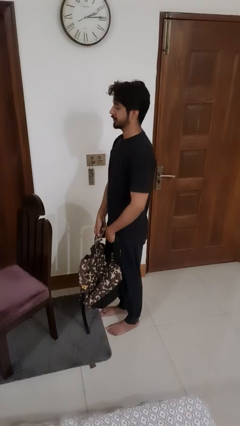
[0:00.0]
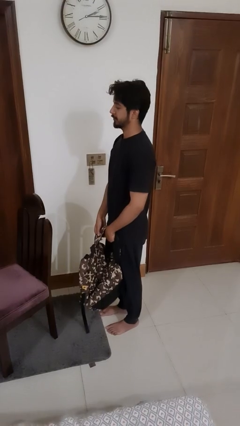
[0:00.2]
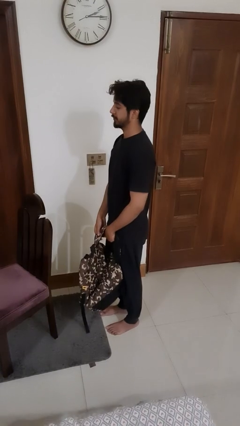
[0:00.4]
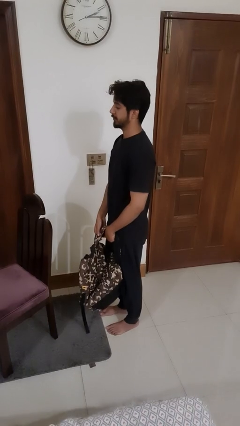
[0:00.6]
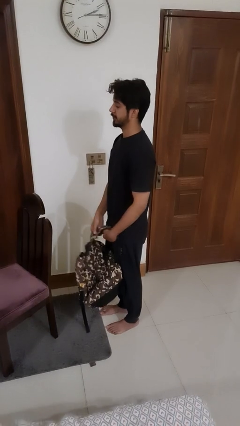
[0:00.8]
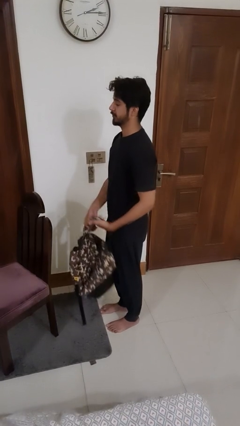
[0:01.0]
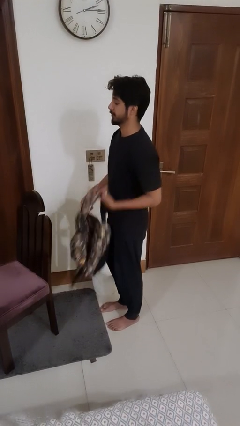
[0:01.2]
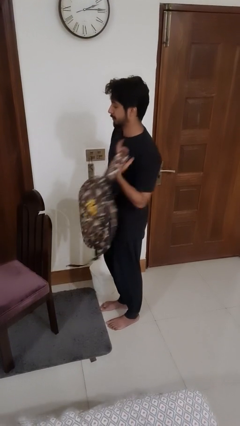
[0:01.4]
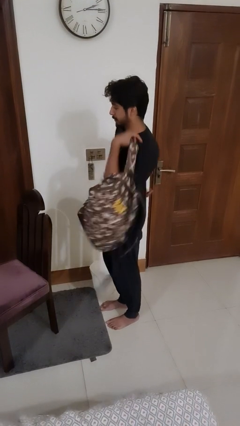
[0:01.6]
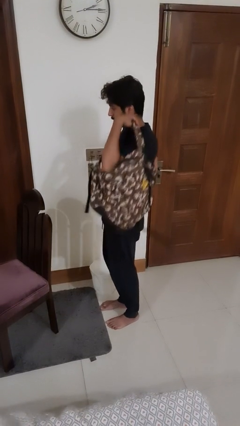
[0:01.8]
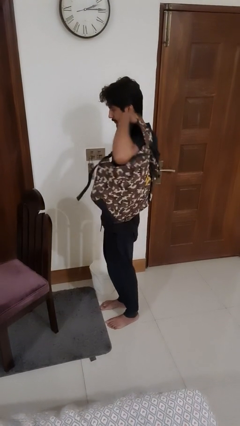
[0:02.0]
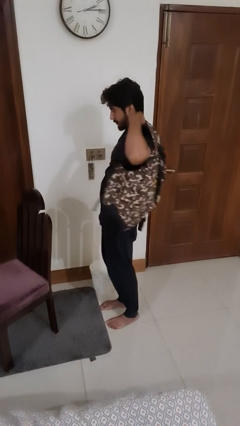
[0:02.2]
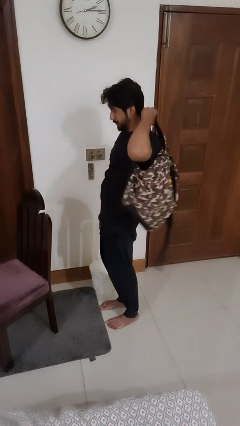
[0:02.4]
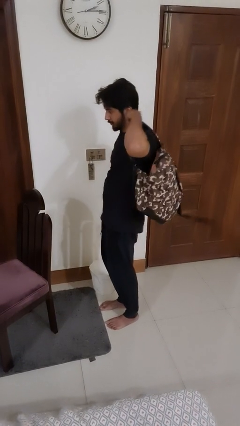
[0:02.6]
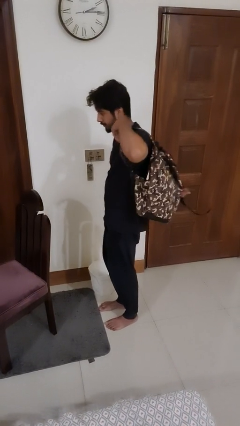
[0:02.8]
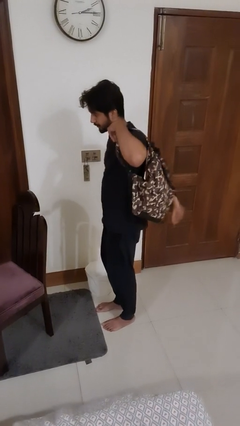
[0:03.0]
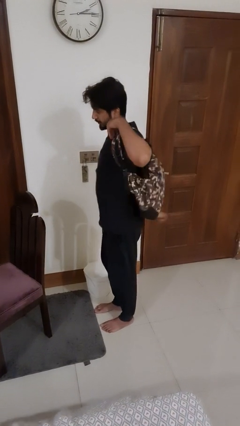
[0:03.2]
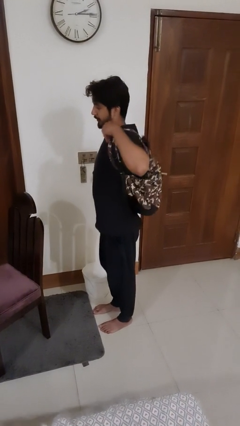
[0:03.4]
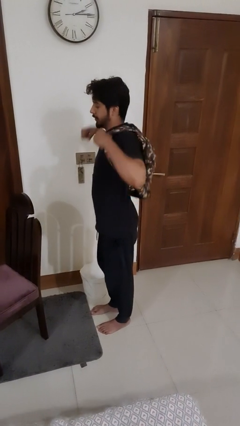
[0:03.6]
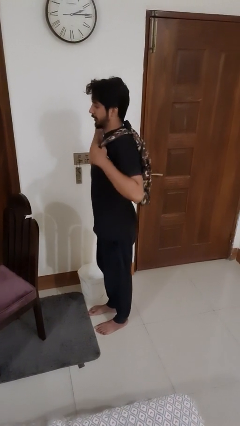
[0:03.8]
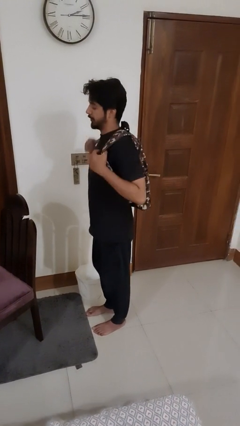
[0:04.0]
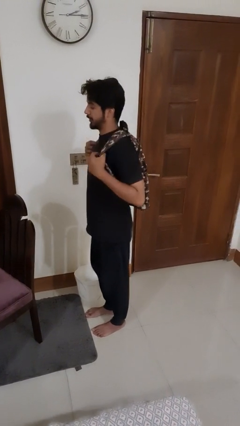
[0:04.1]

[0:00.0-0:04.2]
person puts on backpack

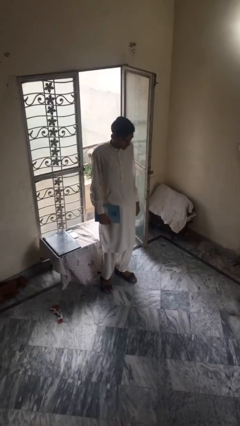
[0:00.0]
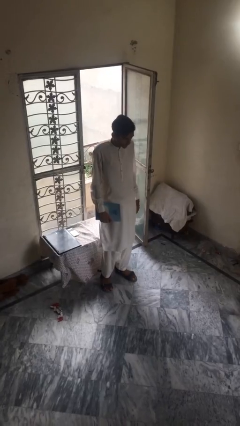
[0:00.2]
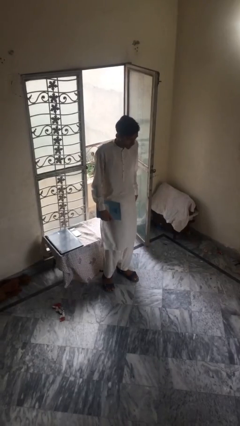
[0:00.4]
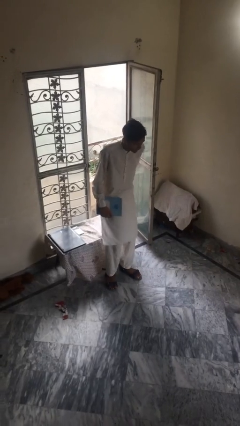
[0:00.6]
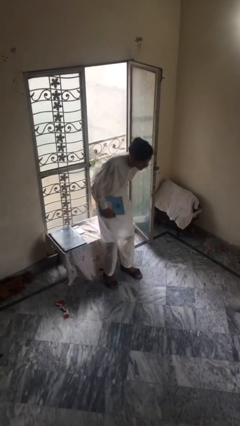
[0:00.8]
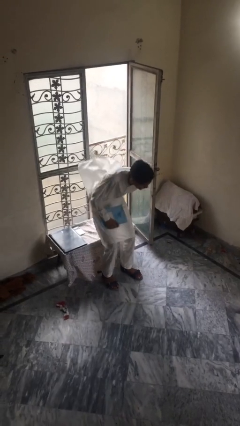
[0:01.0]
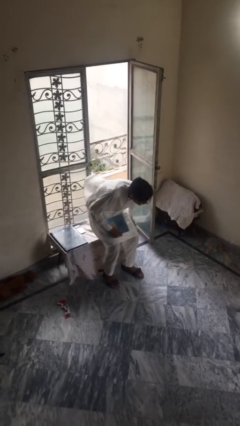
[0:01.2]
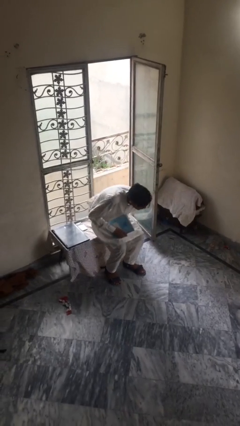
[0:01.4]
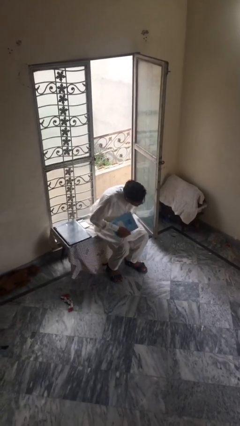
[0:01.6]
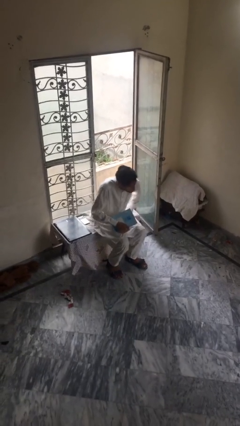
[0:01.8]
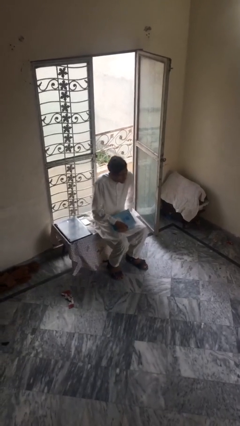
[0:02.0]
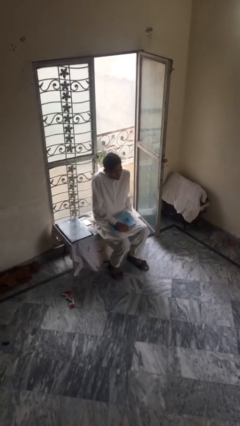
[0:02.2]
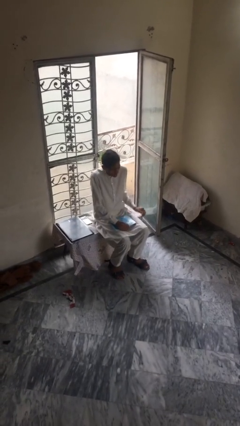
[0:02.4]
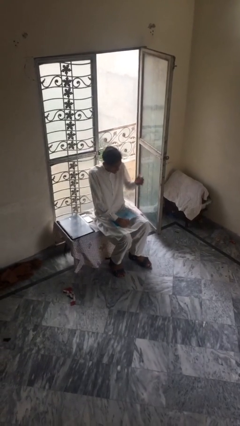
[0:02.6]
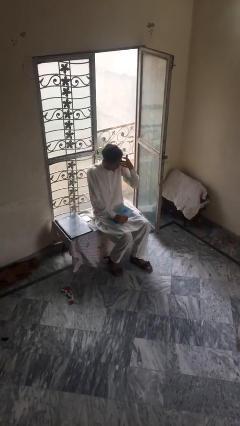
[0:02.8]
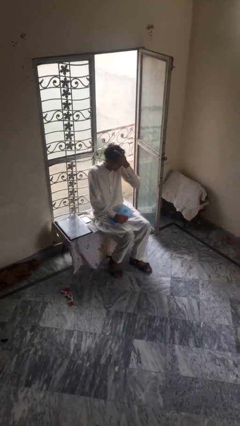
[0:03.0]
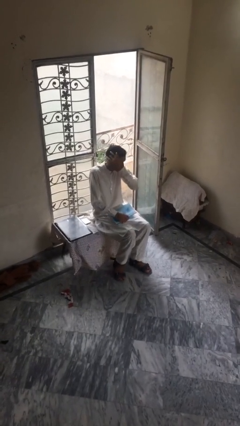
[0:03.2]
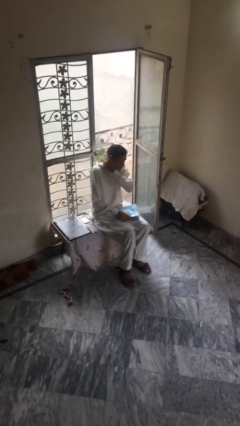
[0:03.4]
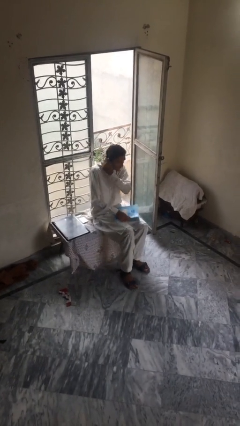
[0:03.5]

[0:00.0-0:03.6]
person sits down

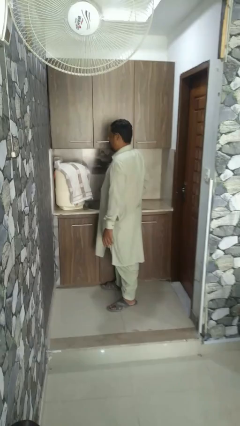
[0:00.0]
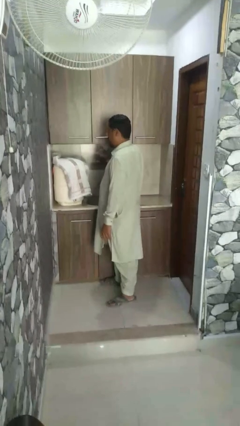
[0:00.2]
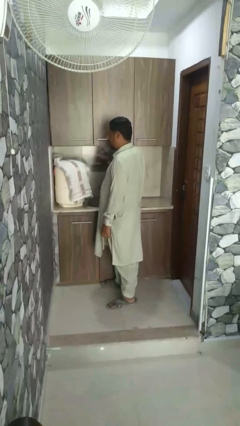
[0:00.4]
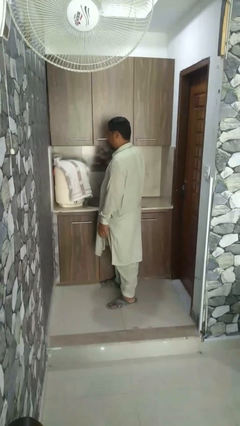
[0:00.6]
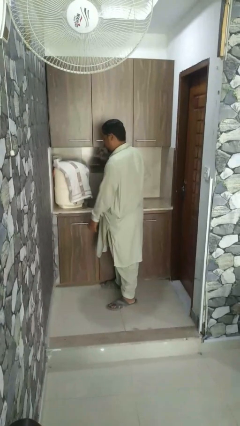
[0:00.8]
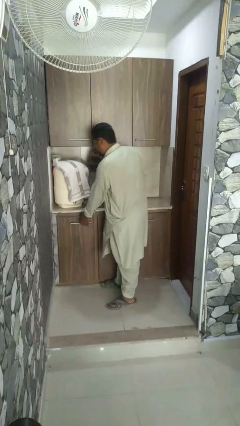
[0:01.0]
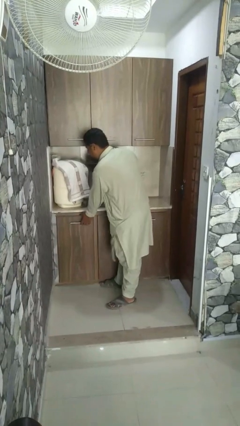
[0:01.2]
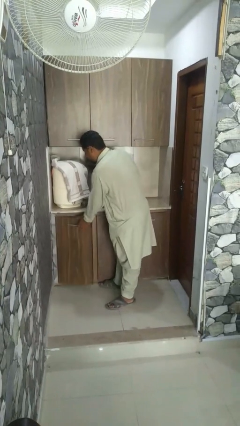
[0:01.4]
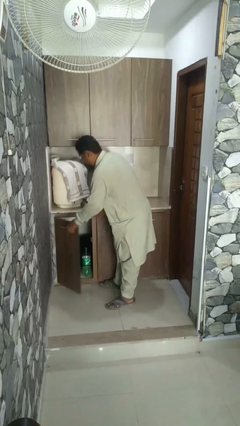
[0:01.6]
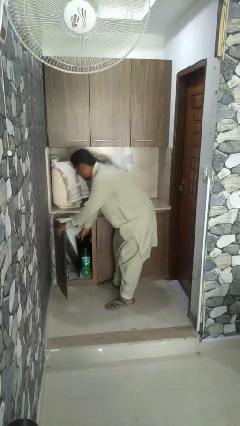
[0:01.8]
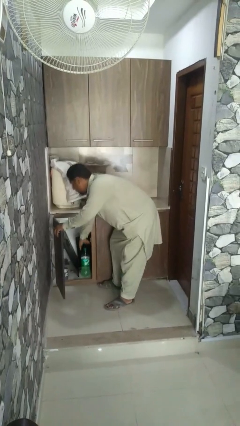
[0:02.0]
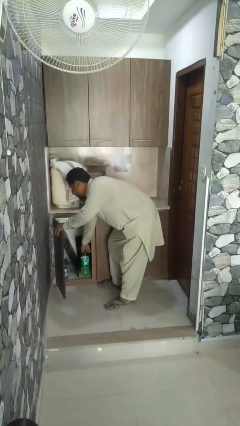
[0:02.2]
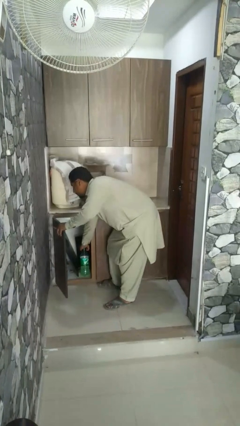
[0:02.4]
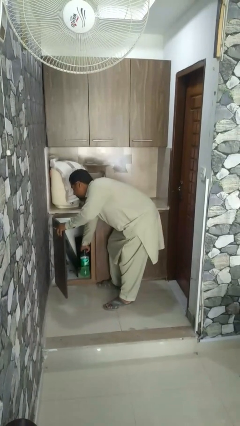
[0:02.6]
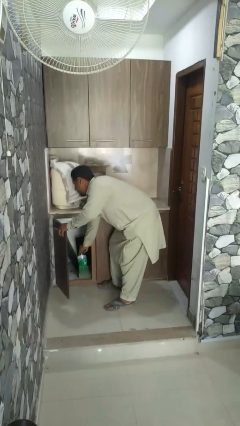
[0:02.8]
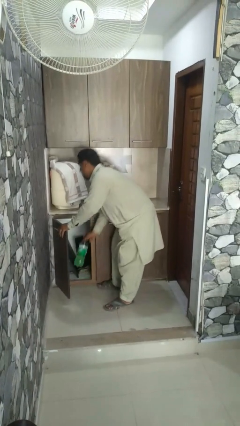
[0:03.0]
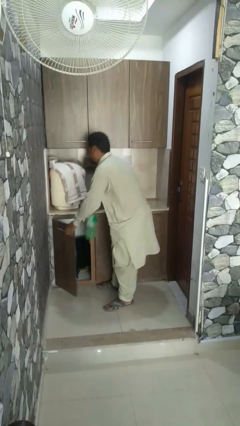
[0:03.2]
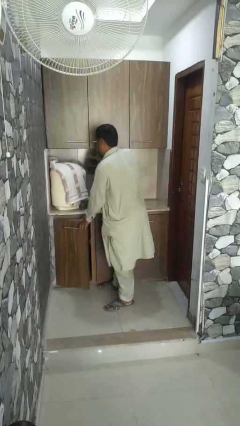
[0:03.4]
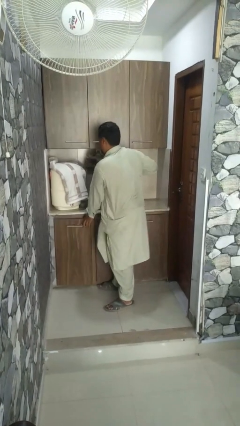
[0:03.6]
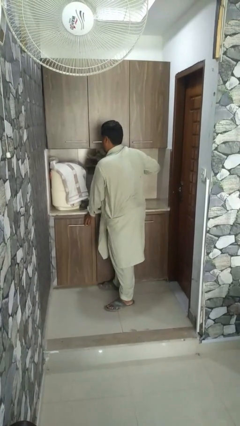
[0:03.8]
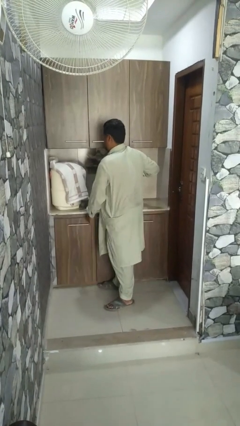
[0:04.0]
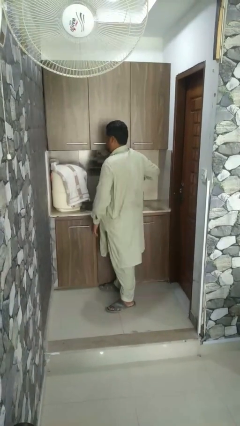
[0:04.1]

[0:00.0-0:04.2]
person takes object from refrigerator

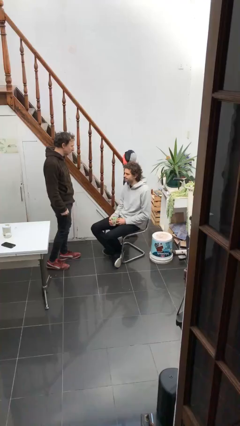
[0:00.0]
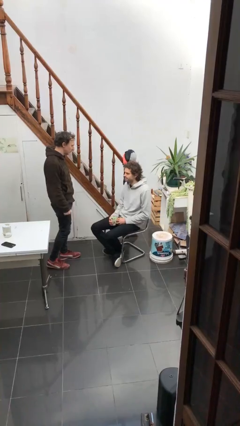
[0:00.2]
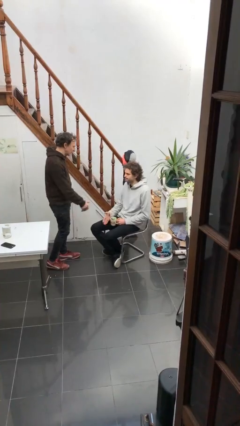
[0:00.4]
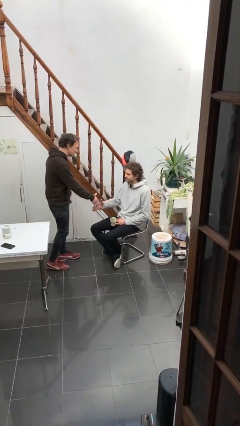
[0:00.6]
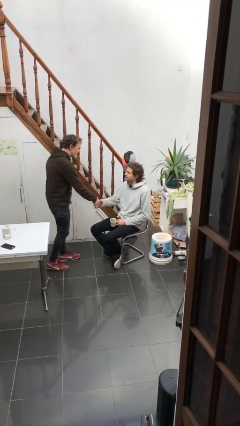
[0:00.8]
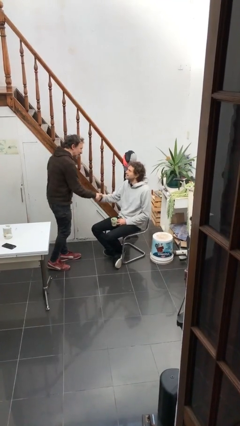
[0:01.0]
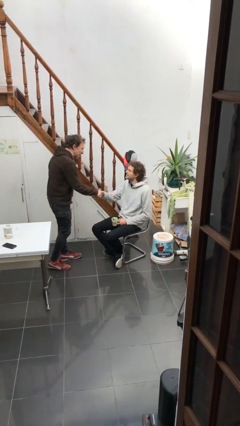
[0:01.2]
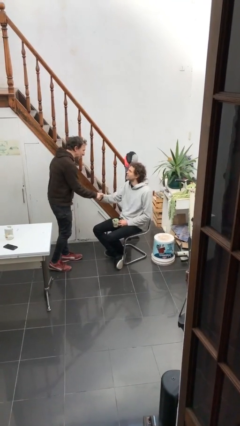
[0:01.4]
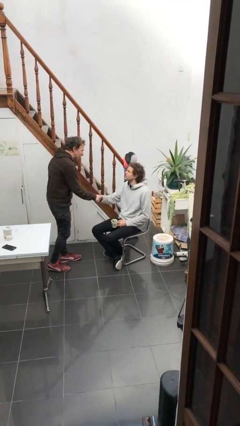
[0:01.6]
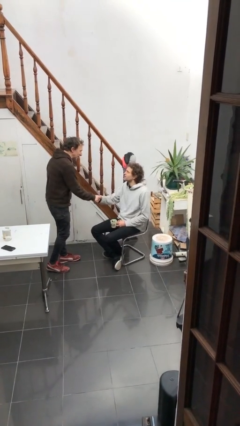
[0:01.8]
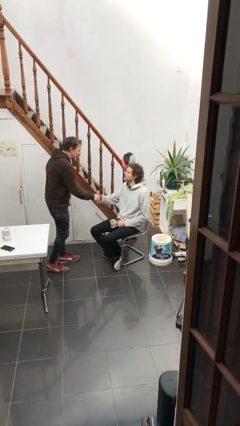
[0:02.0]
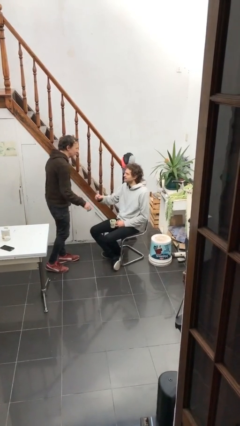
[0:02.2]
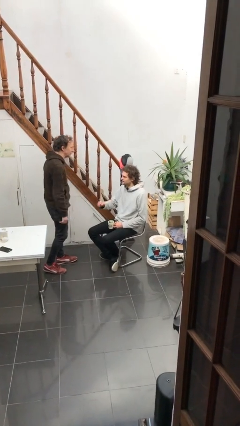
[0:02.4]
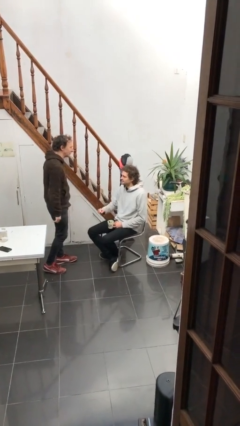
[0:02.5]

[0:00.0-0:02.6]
person shakes hand

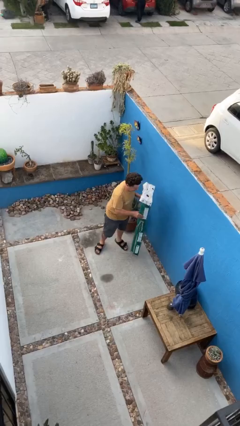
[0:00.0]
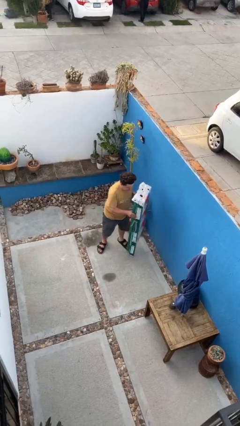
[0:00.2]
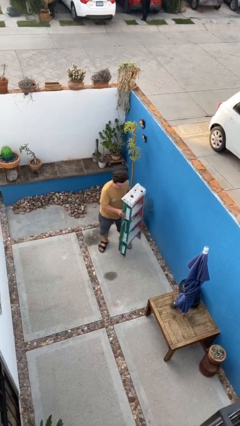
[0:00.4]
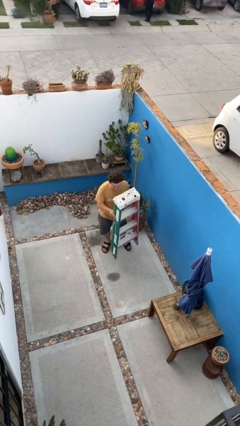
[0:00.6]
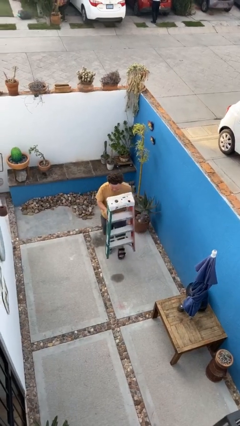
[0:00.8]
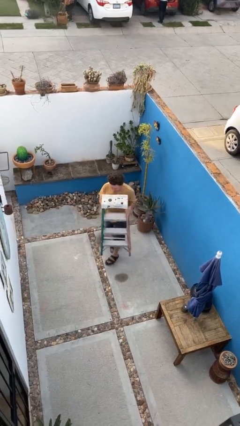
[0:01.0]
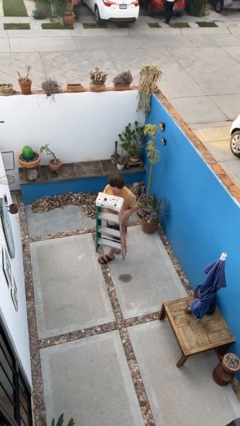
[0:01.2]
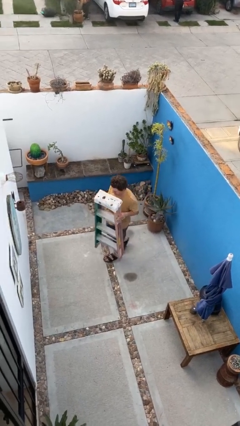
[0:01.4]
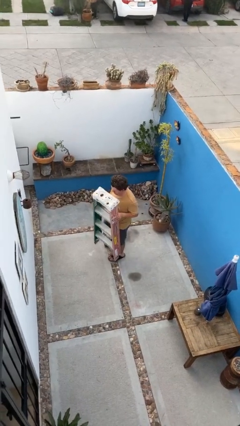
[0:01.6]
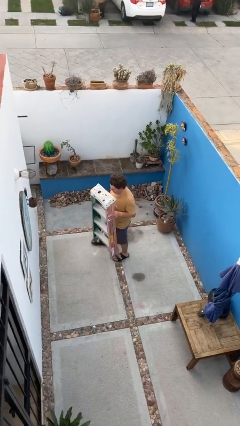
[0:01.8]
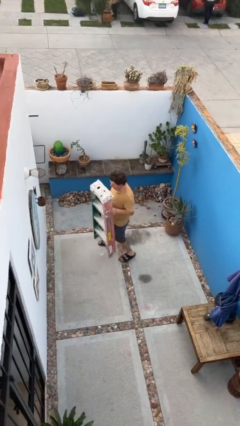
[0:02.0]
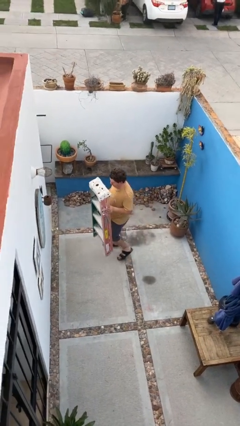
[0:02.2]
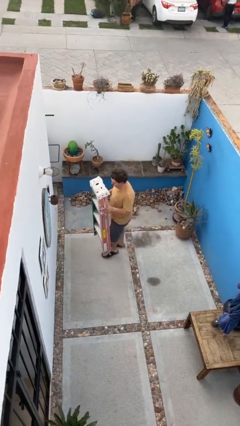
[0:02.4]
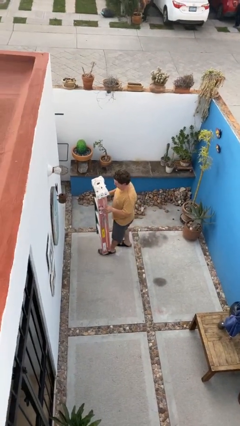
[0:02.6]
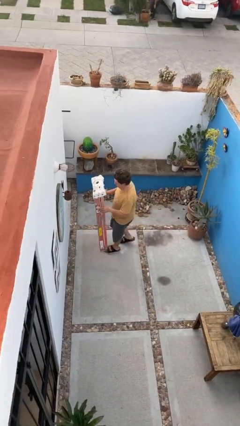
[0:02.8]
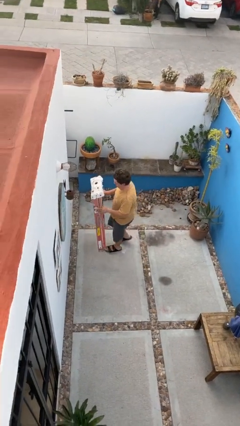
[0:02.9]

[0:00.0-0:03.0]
person carries heavy object
